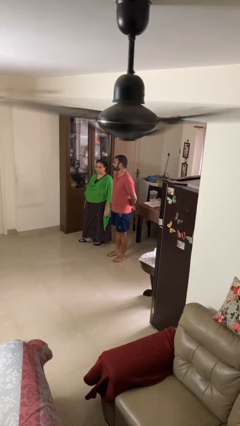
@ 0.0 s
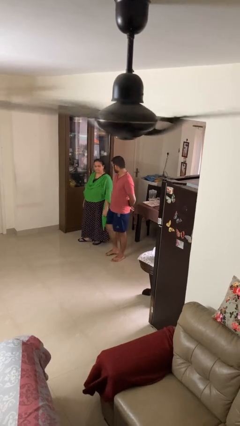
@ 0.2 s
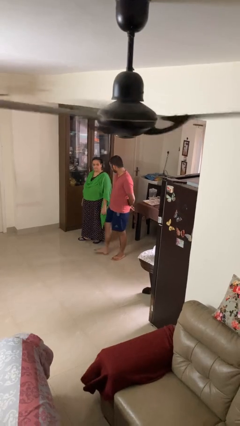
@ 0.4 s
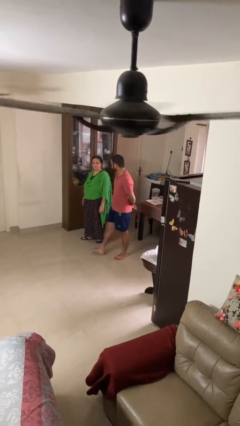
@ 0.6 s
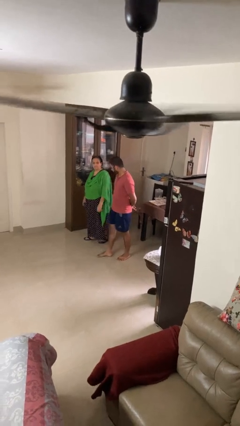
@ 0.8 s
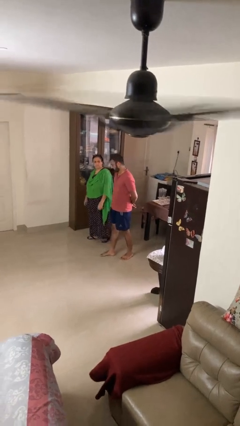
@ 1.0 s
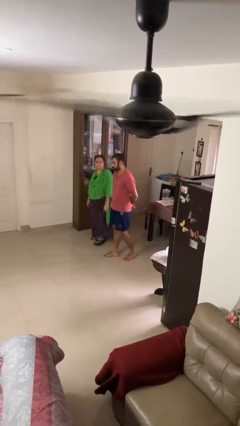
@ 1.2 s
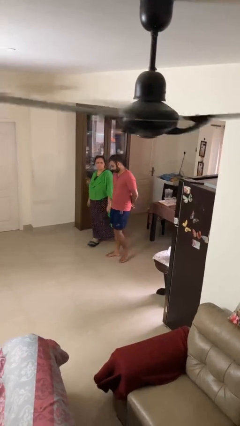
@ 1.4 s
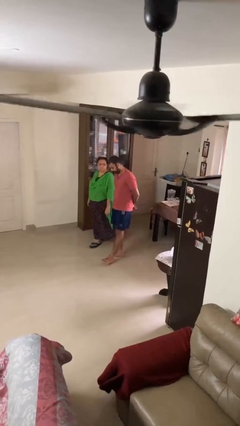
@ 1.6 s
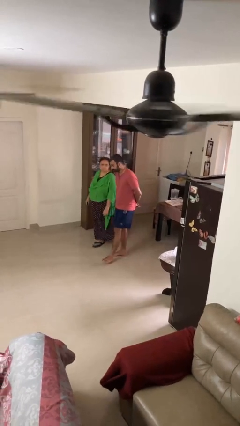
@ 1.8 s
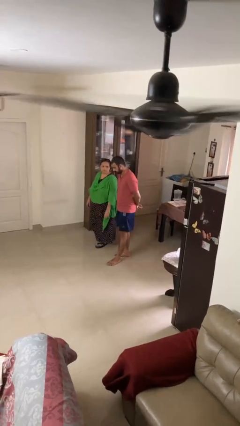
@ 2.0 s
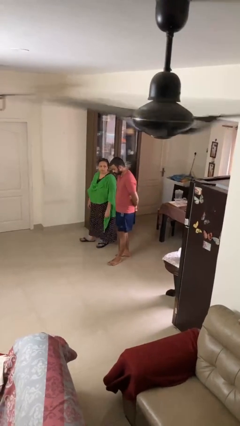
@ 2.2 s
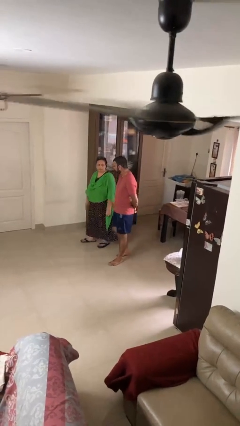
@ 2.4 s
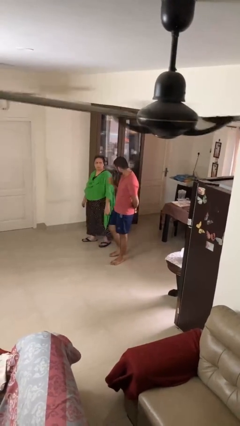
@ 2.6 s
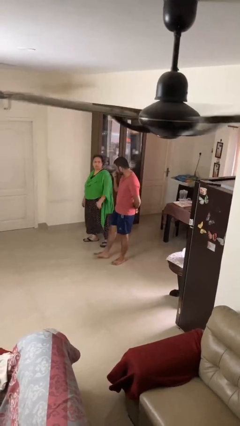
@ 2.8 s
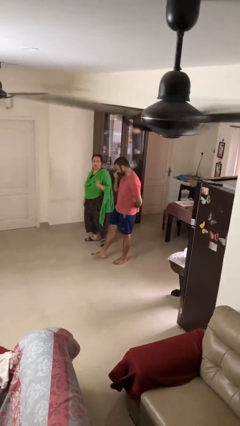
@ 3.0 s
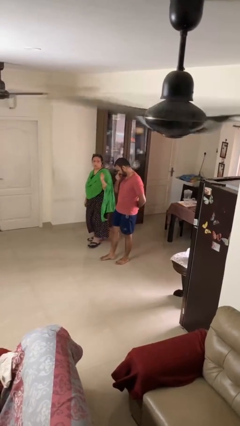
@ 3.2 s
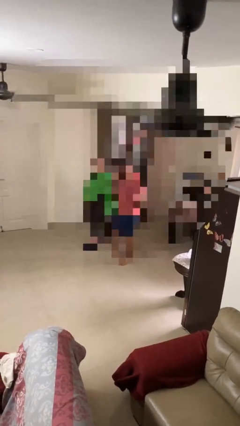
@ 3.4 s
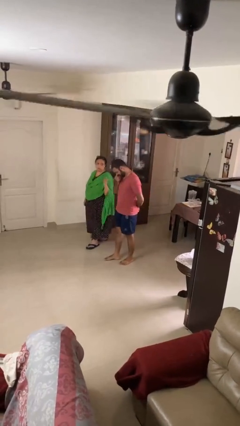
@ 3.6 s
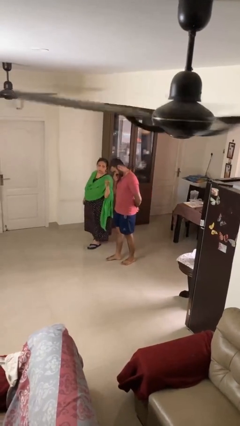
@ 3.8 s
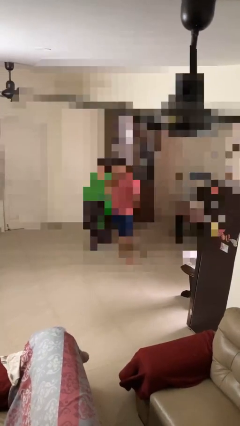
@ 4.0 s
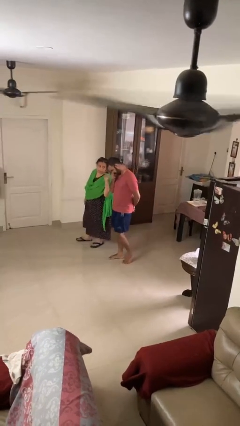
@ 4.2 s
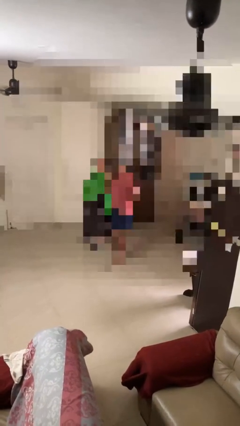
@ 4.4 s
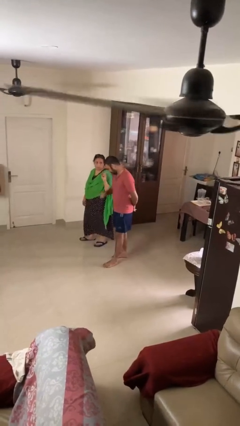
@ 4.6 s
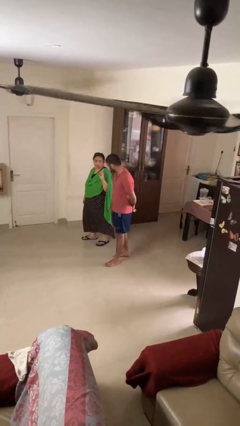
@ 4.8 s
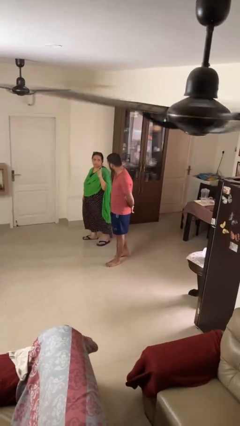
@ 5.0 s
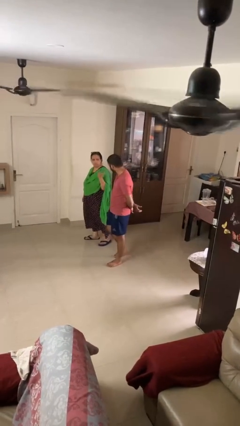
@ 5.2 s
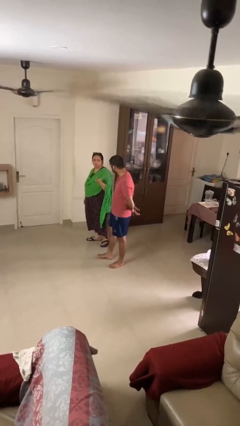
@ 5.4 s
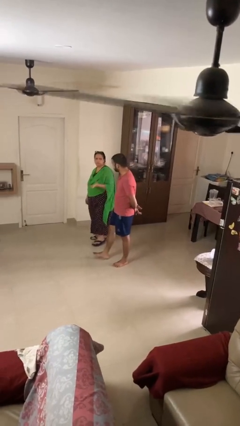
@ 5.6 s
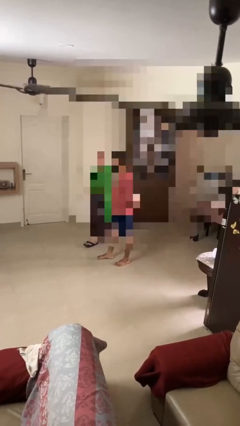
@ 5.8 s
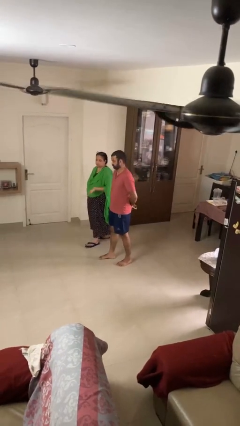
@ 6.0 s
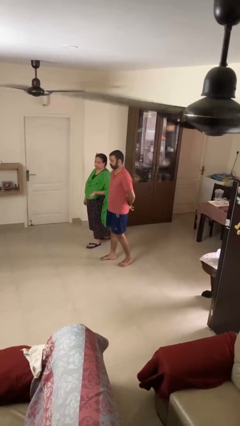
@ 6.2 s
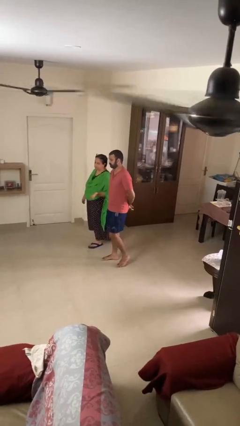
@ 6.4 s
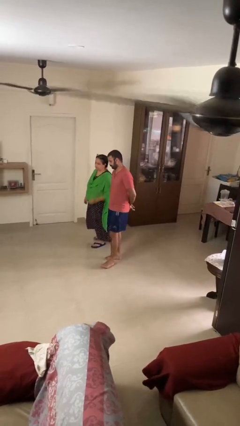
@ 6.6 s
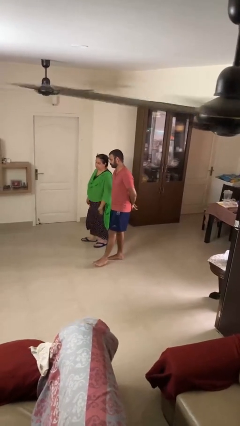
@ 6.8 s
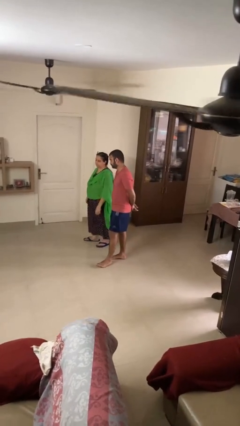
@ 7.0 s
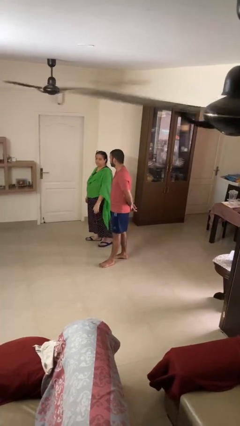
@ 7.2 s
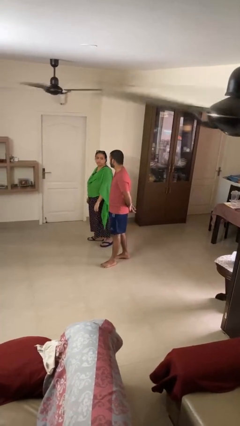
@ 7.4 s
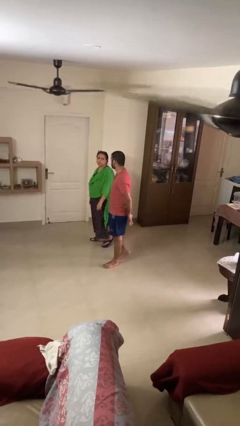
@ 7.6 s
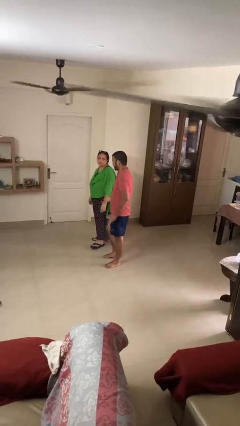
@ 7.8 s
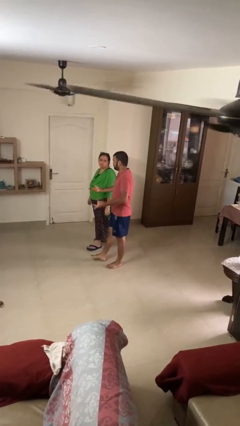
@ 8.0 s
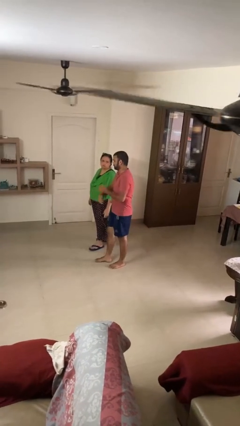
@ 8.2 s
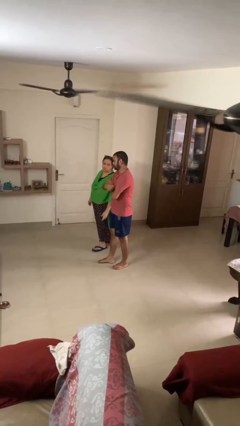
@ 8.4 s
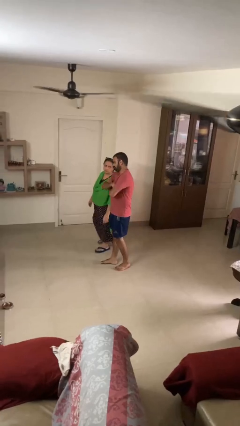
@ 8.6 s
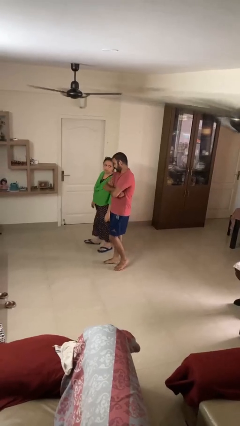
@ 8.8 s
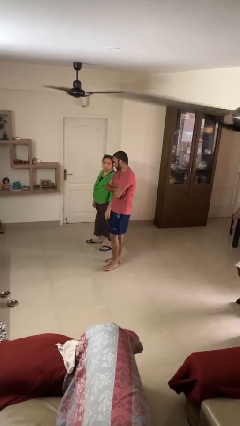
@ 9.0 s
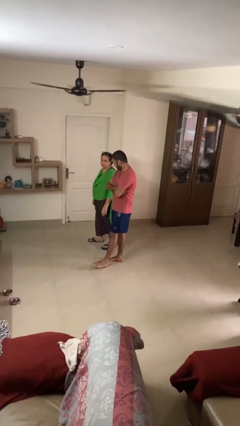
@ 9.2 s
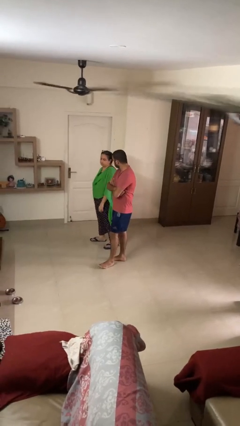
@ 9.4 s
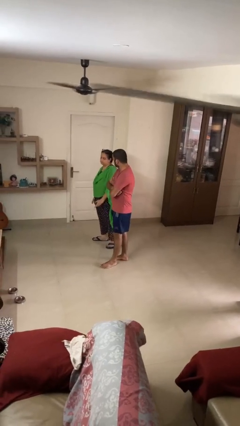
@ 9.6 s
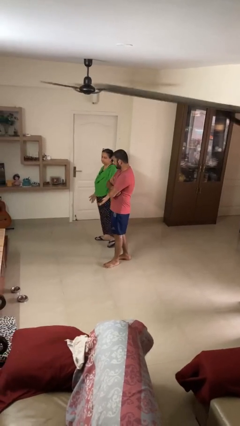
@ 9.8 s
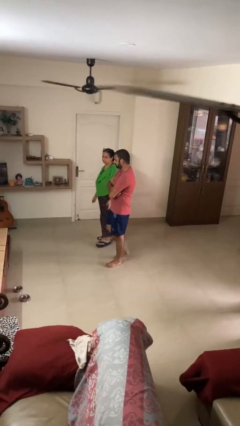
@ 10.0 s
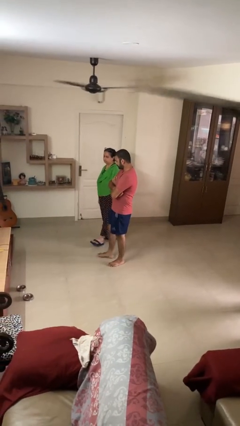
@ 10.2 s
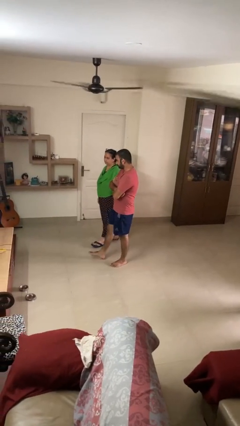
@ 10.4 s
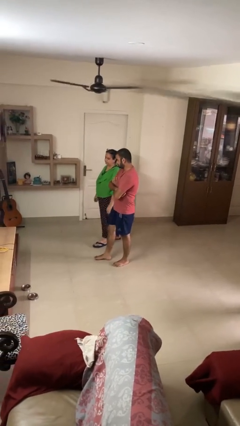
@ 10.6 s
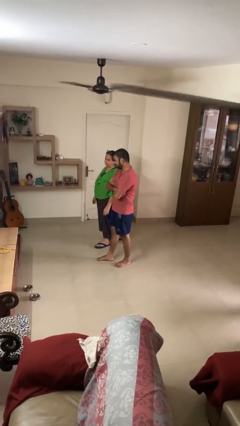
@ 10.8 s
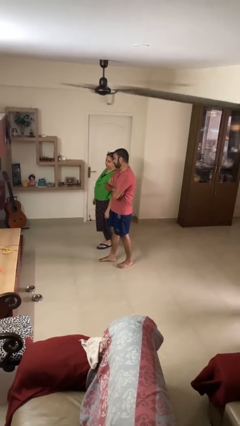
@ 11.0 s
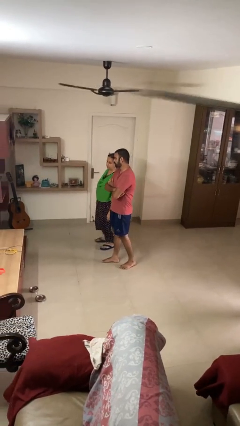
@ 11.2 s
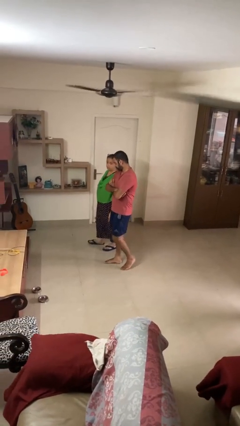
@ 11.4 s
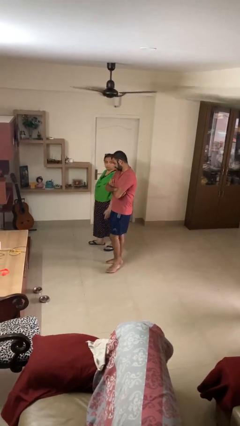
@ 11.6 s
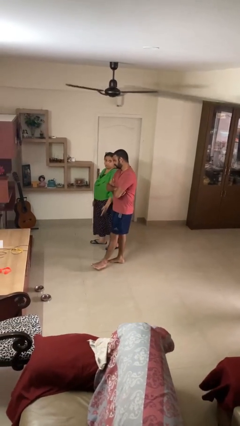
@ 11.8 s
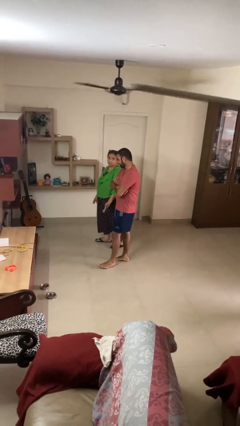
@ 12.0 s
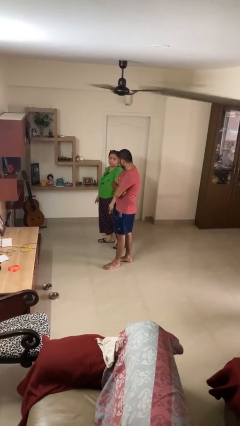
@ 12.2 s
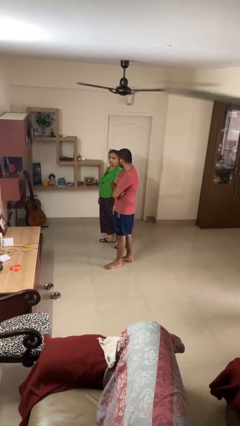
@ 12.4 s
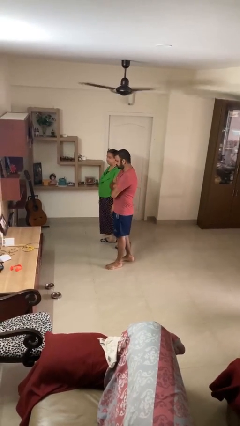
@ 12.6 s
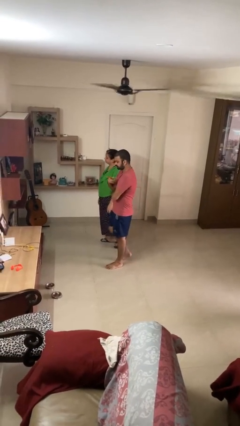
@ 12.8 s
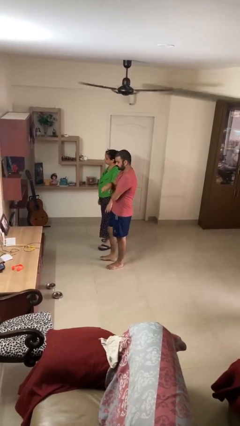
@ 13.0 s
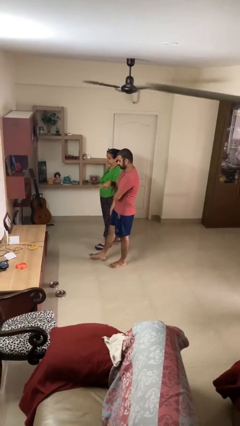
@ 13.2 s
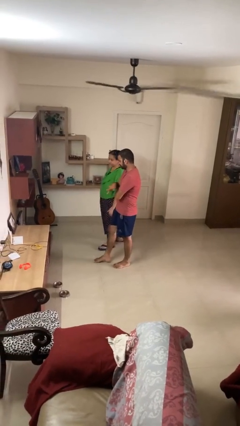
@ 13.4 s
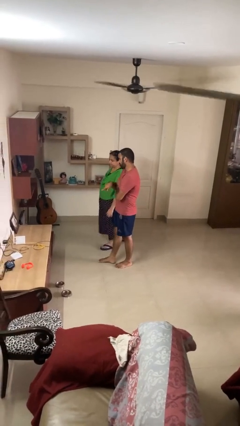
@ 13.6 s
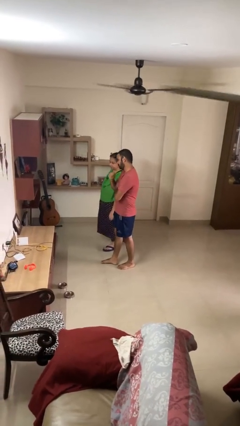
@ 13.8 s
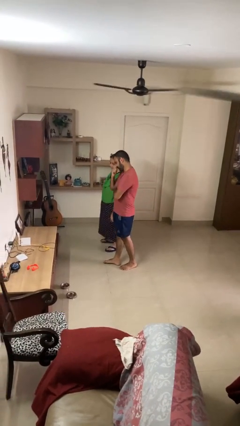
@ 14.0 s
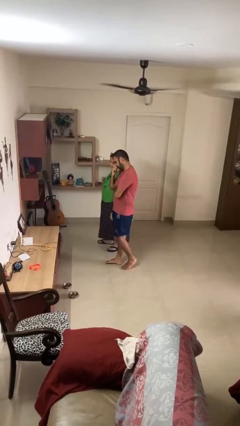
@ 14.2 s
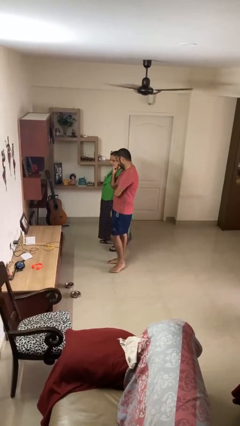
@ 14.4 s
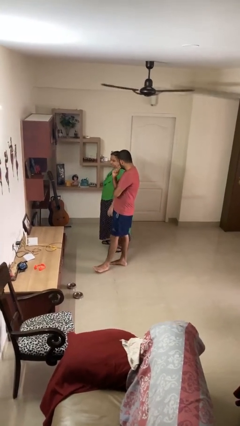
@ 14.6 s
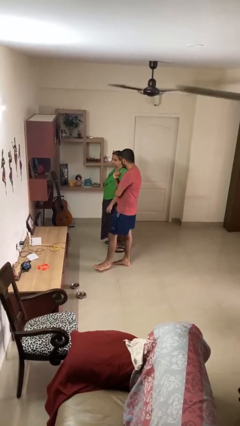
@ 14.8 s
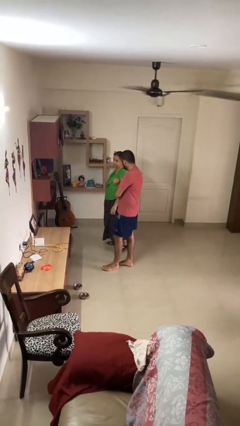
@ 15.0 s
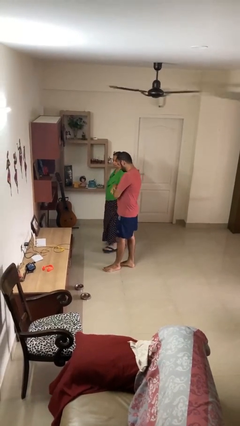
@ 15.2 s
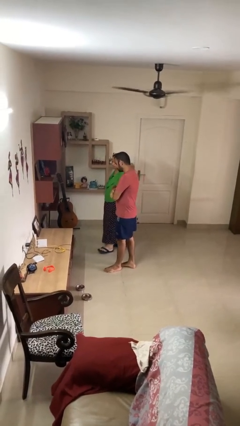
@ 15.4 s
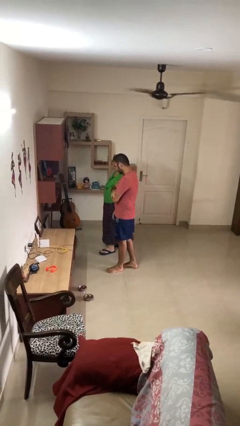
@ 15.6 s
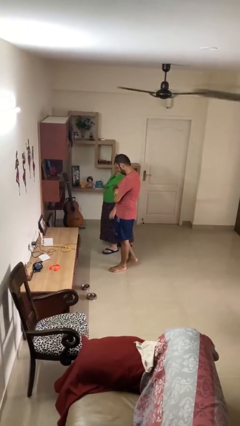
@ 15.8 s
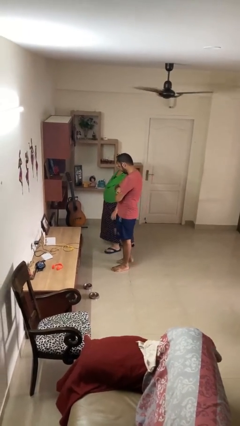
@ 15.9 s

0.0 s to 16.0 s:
person talks to person

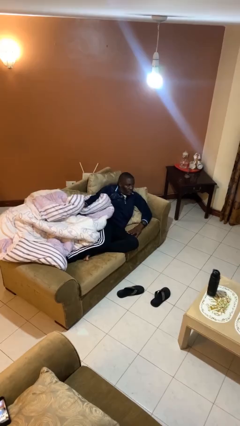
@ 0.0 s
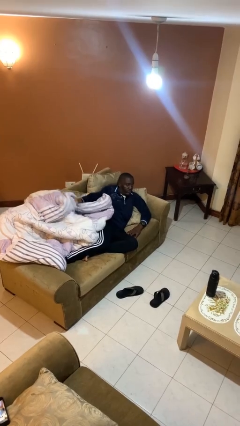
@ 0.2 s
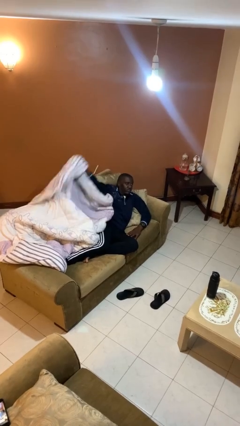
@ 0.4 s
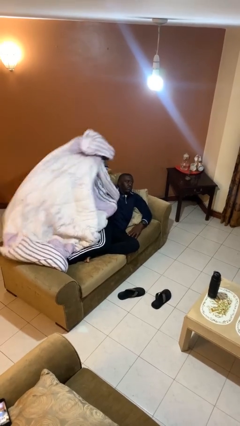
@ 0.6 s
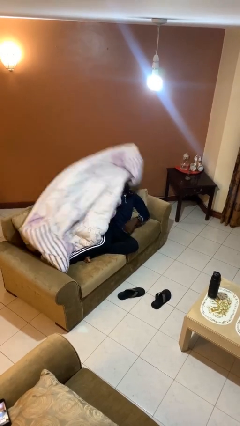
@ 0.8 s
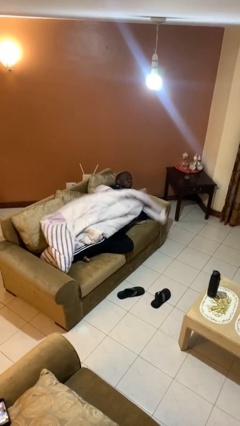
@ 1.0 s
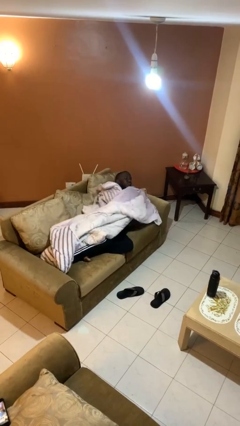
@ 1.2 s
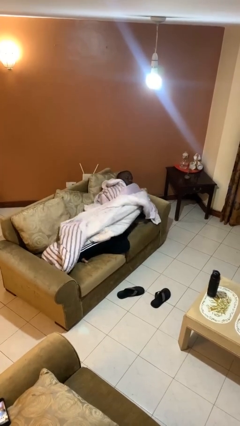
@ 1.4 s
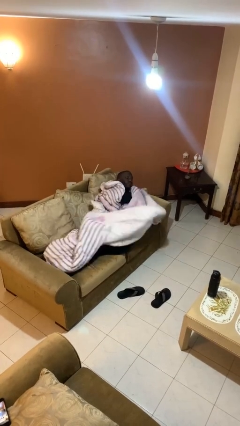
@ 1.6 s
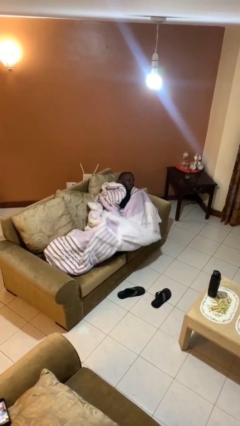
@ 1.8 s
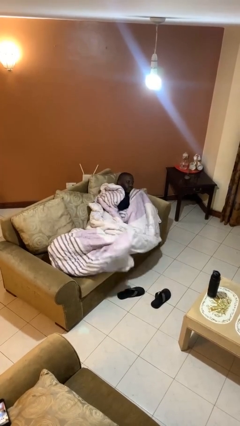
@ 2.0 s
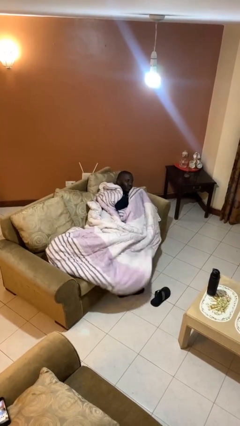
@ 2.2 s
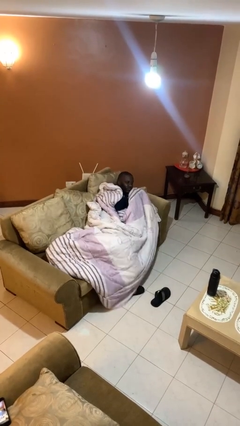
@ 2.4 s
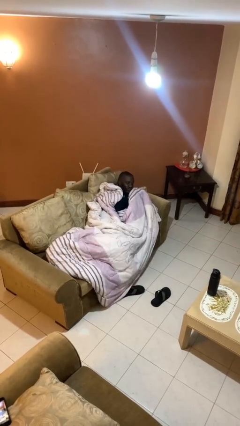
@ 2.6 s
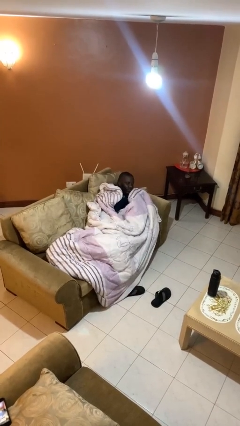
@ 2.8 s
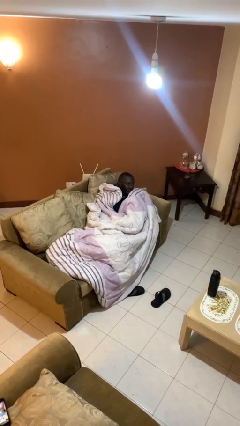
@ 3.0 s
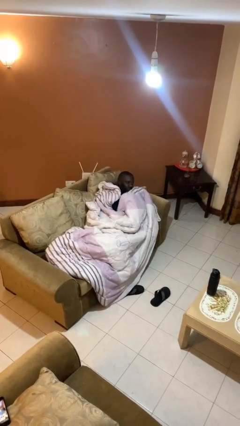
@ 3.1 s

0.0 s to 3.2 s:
person covers with blanket
